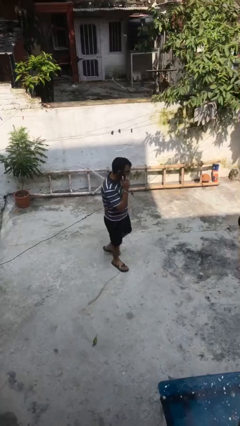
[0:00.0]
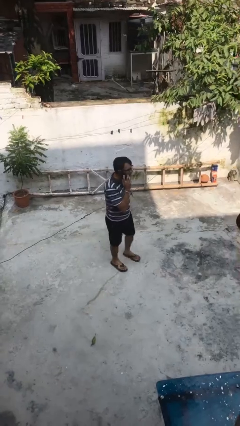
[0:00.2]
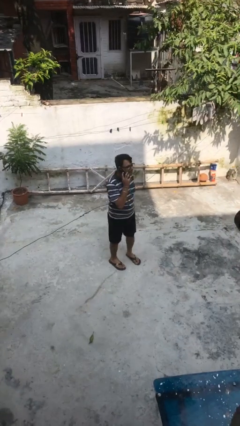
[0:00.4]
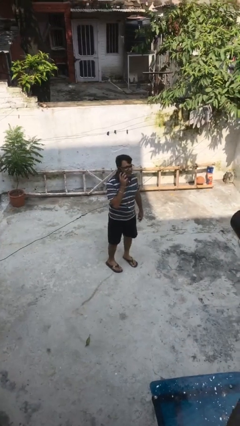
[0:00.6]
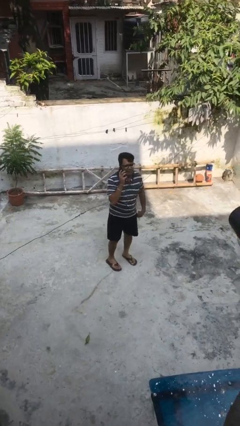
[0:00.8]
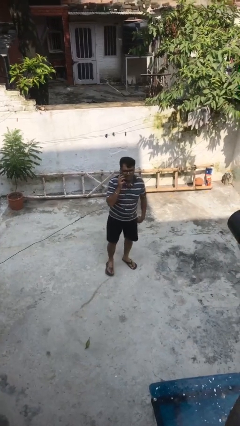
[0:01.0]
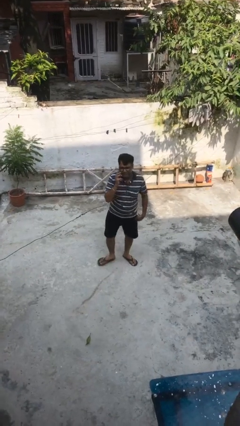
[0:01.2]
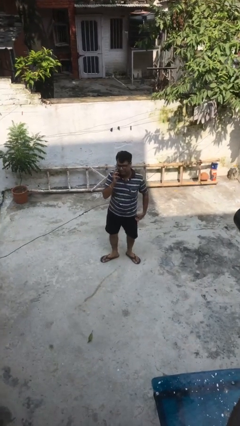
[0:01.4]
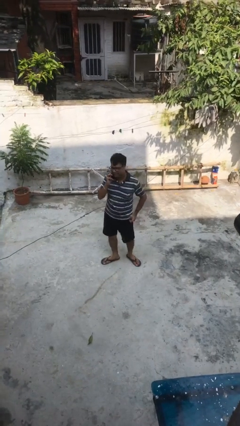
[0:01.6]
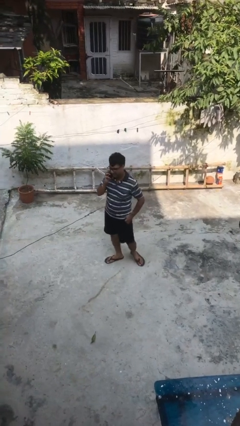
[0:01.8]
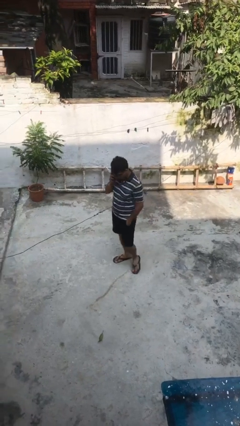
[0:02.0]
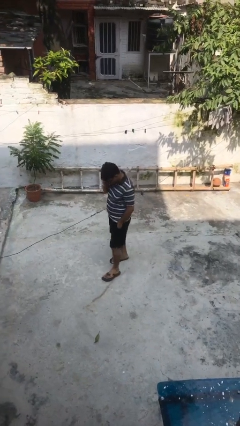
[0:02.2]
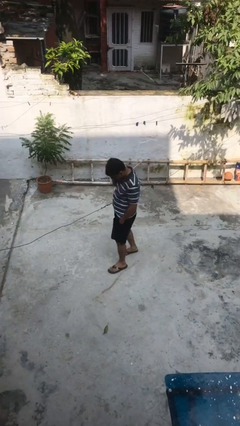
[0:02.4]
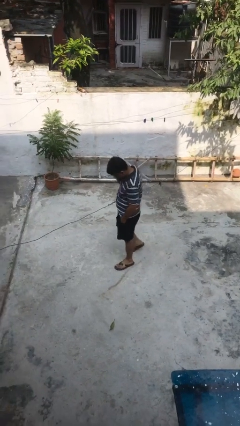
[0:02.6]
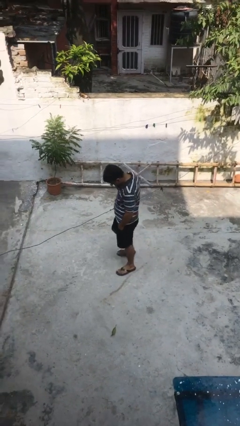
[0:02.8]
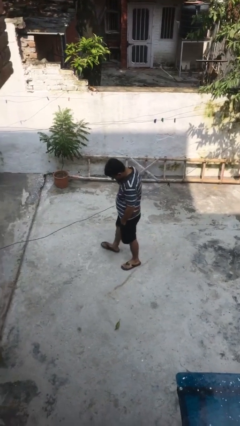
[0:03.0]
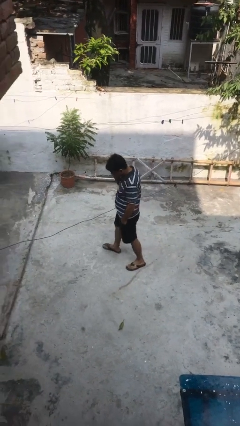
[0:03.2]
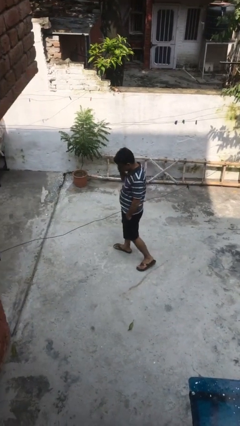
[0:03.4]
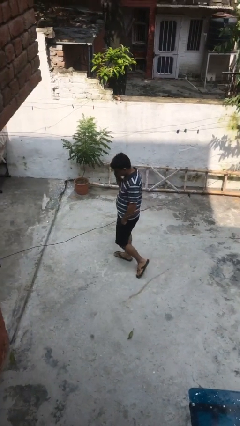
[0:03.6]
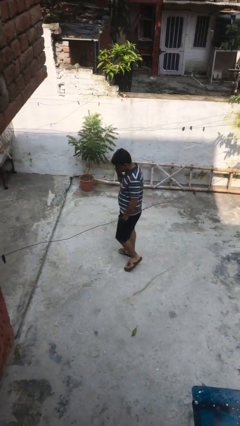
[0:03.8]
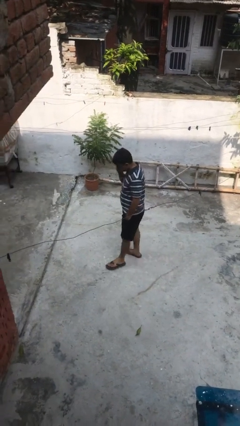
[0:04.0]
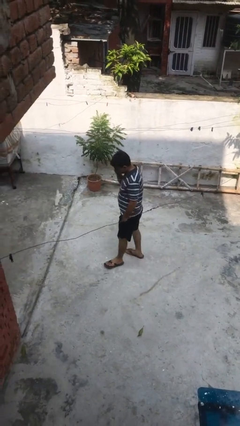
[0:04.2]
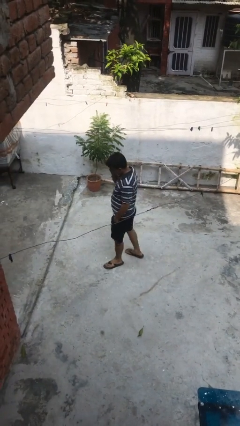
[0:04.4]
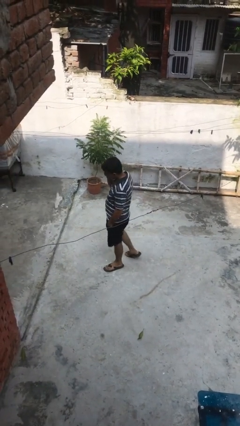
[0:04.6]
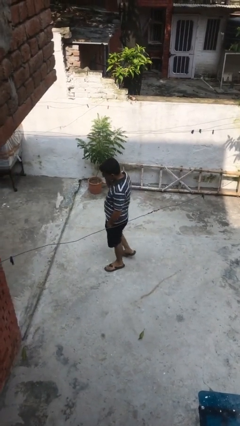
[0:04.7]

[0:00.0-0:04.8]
person talks on phone

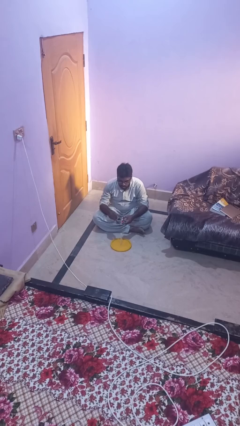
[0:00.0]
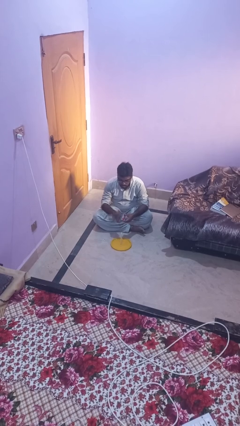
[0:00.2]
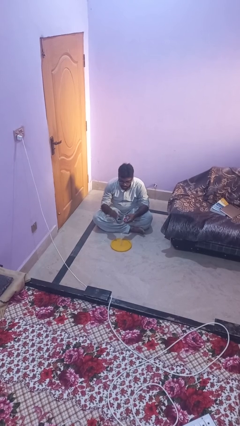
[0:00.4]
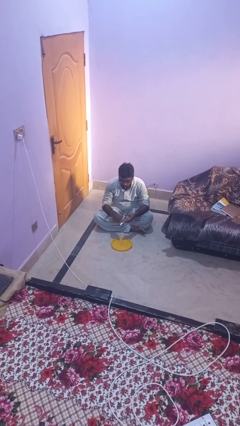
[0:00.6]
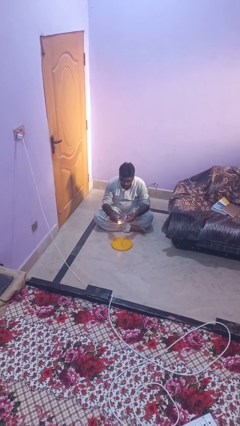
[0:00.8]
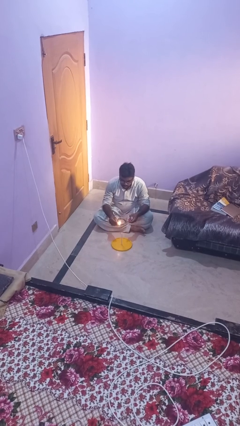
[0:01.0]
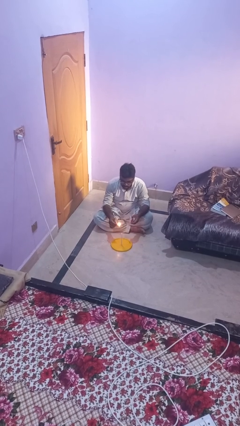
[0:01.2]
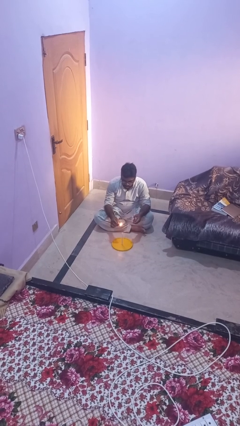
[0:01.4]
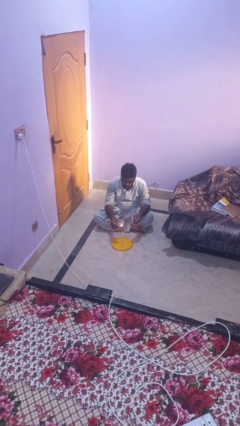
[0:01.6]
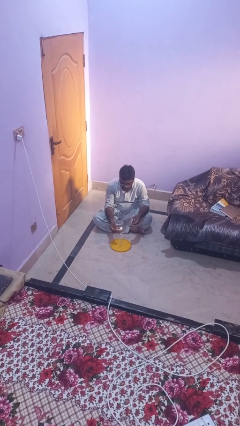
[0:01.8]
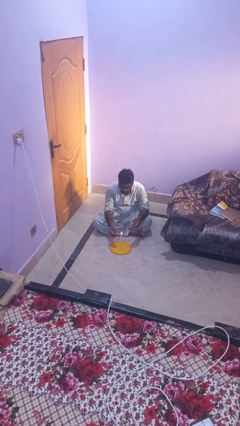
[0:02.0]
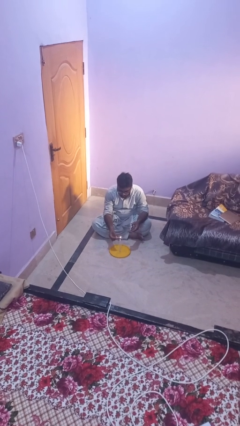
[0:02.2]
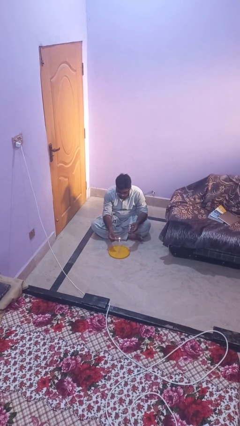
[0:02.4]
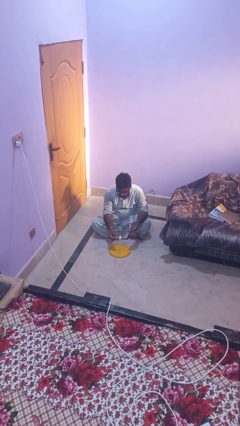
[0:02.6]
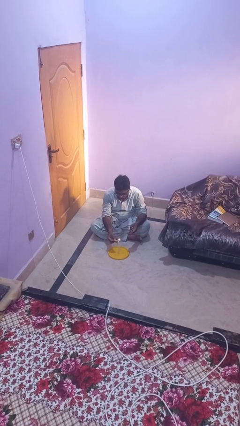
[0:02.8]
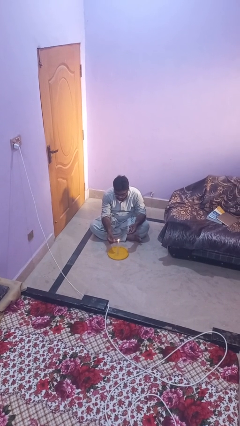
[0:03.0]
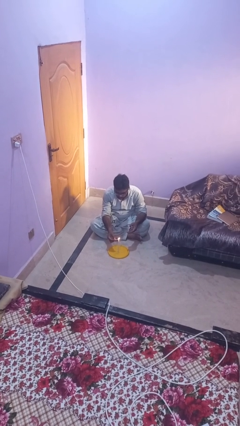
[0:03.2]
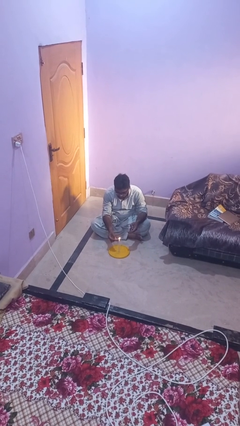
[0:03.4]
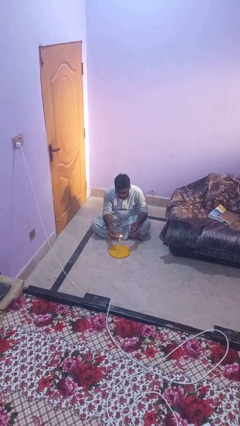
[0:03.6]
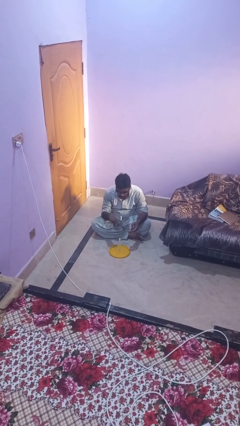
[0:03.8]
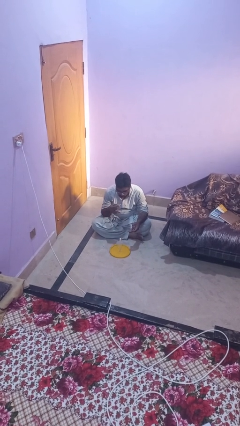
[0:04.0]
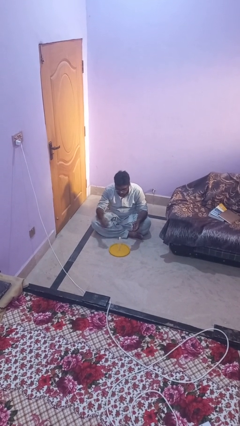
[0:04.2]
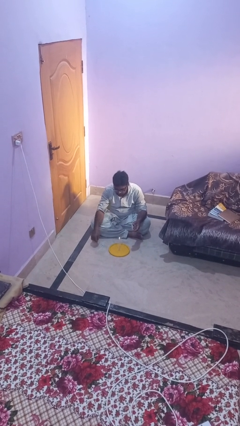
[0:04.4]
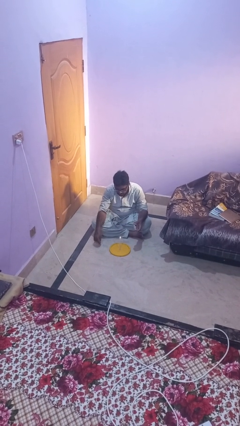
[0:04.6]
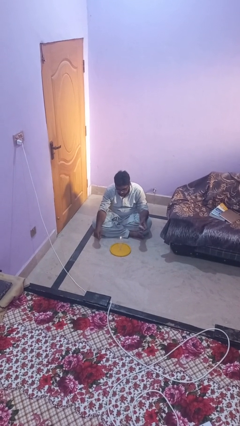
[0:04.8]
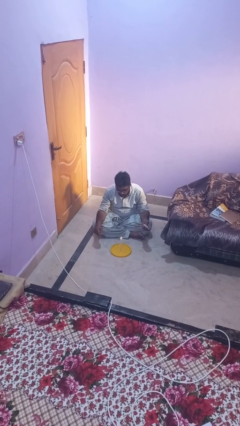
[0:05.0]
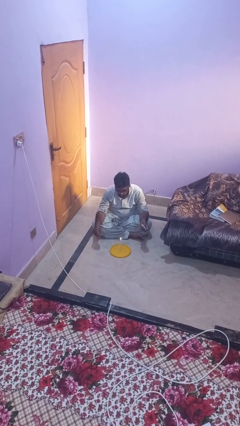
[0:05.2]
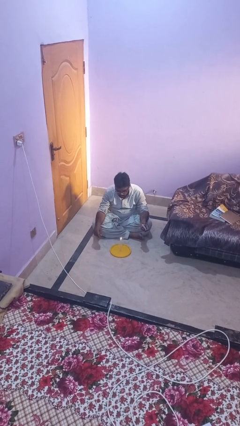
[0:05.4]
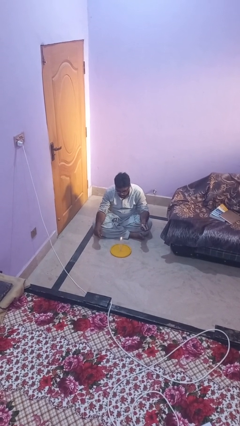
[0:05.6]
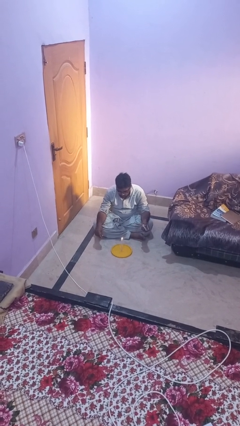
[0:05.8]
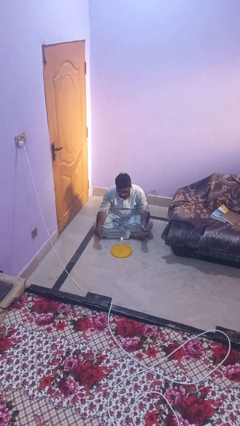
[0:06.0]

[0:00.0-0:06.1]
person lights candle

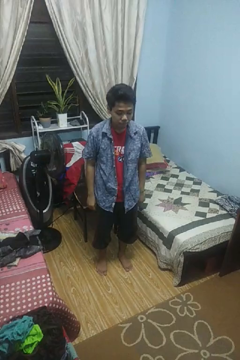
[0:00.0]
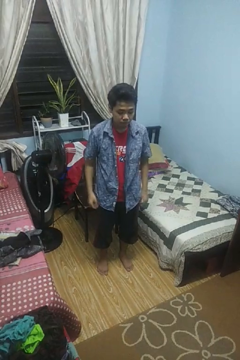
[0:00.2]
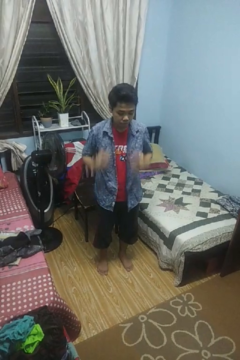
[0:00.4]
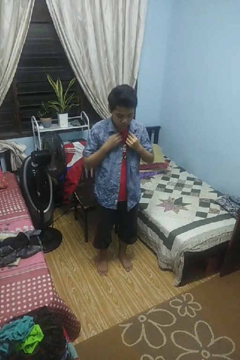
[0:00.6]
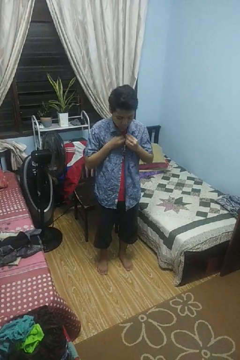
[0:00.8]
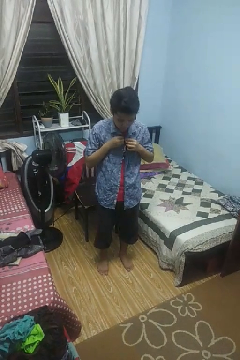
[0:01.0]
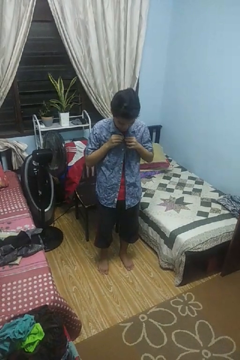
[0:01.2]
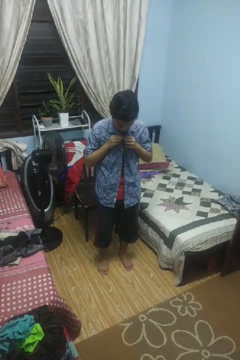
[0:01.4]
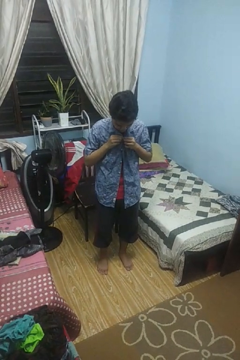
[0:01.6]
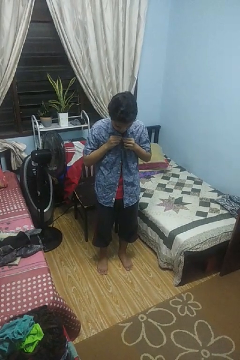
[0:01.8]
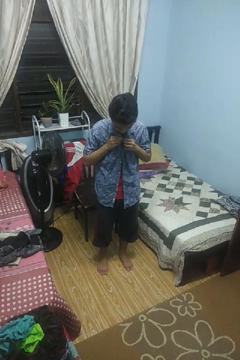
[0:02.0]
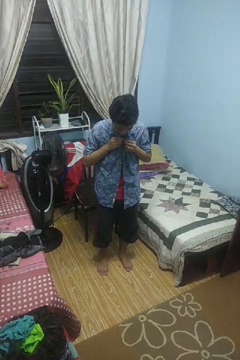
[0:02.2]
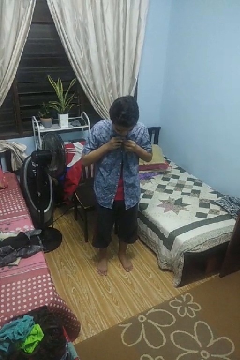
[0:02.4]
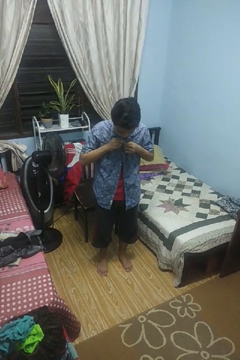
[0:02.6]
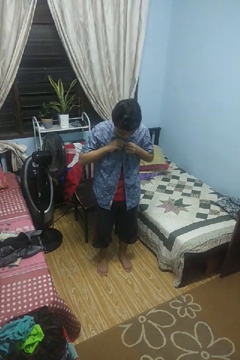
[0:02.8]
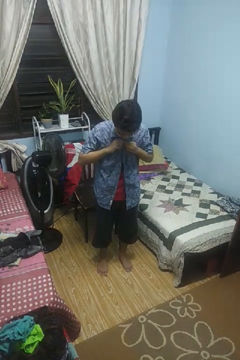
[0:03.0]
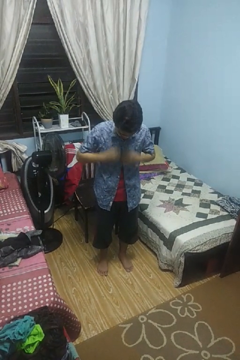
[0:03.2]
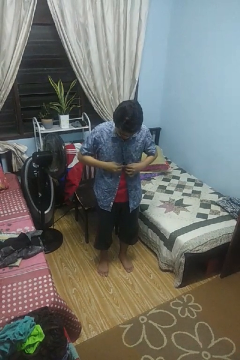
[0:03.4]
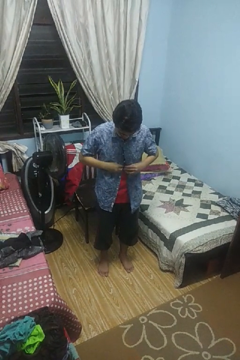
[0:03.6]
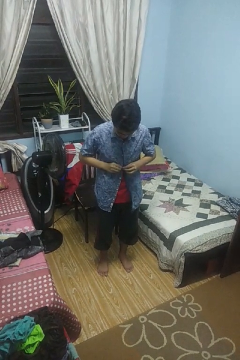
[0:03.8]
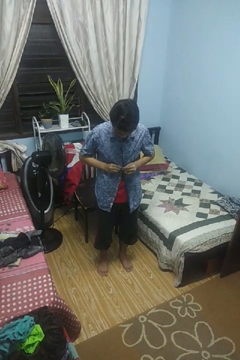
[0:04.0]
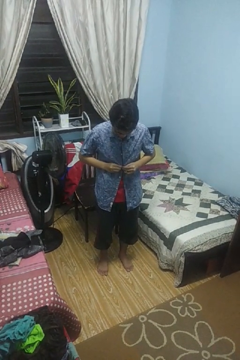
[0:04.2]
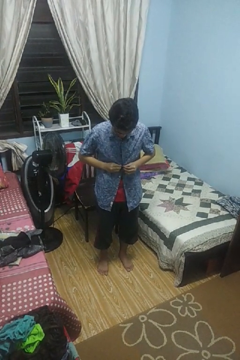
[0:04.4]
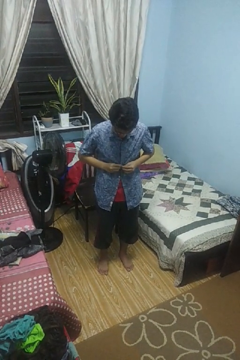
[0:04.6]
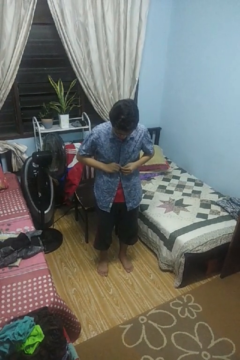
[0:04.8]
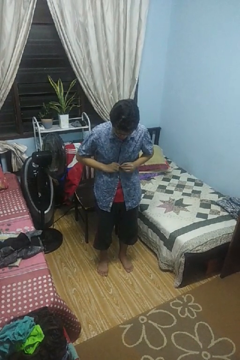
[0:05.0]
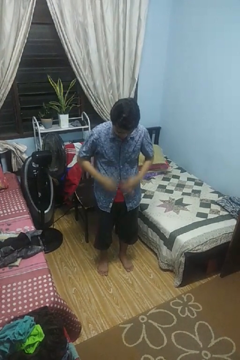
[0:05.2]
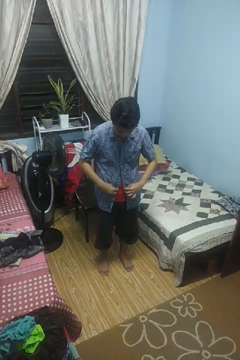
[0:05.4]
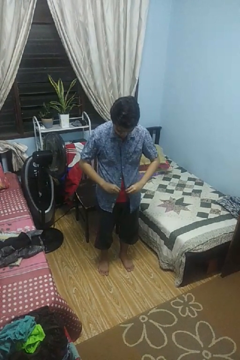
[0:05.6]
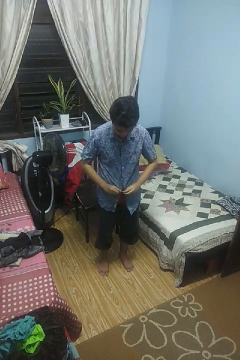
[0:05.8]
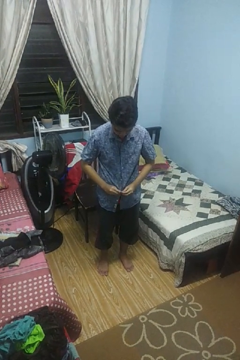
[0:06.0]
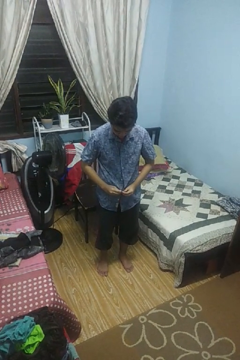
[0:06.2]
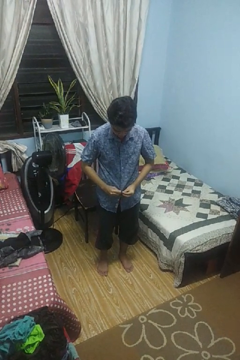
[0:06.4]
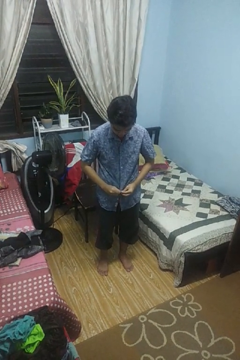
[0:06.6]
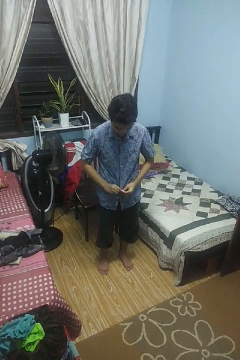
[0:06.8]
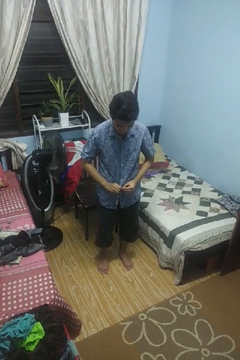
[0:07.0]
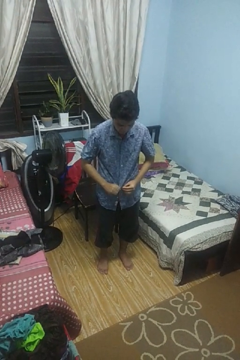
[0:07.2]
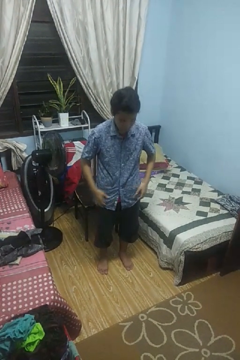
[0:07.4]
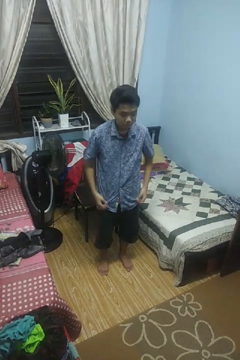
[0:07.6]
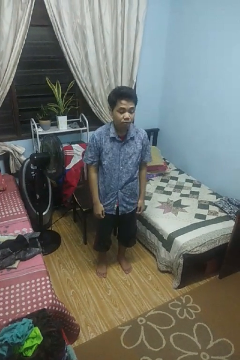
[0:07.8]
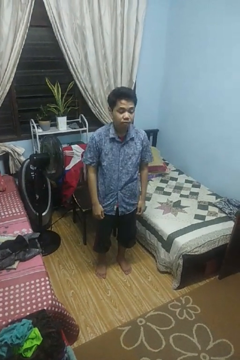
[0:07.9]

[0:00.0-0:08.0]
person buttons shirt

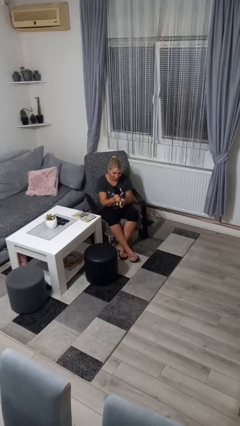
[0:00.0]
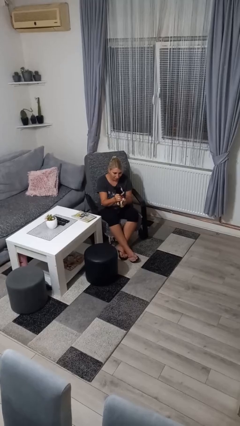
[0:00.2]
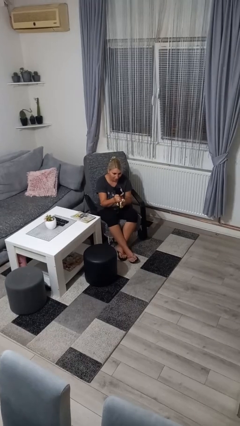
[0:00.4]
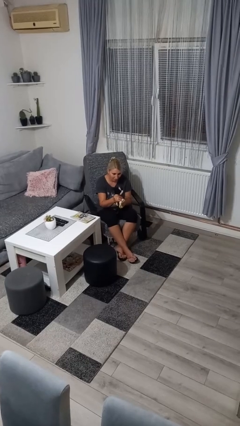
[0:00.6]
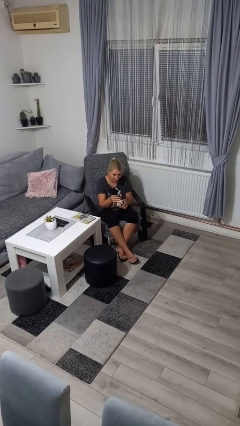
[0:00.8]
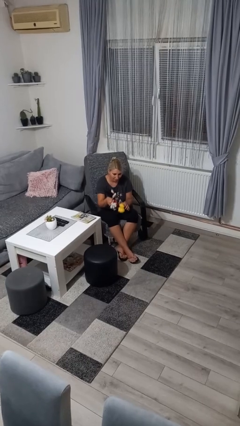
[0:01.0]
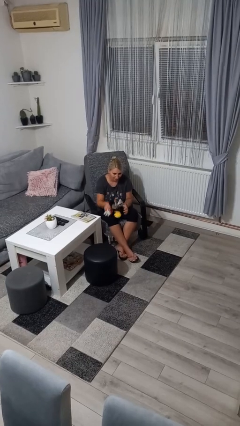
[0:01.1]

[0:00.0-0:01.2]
person squeezes object
